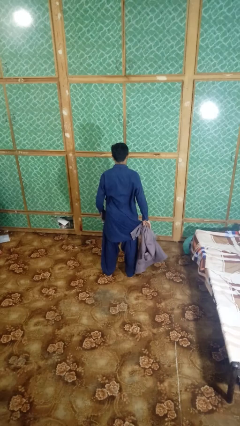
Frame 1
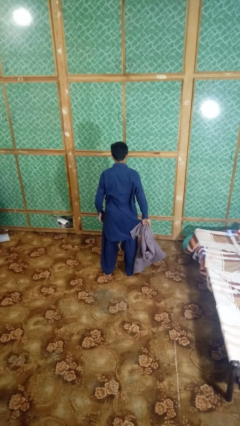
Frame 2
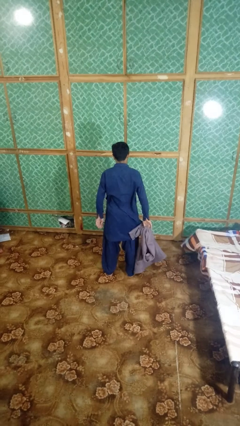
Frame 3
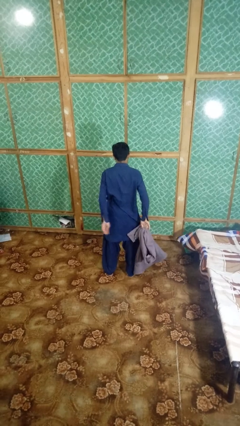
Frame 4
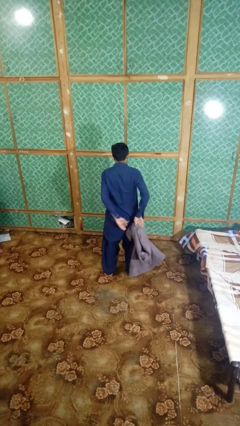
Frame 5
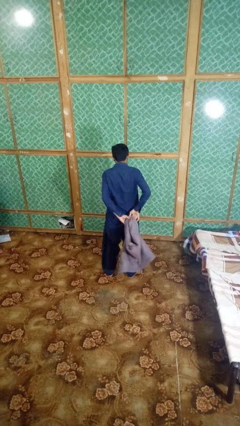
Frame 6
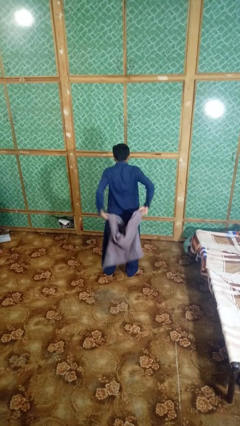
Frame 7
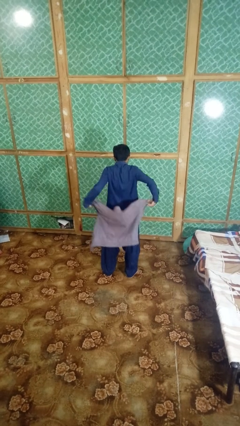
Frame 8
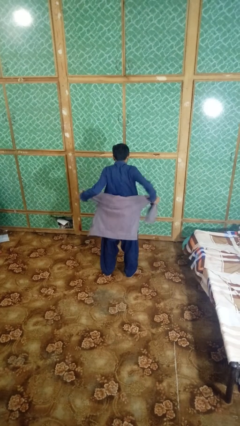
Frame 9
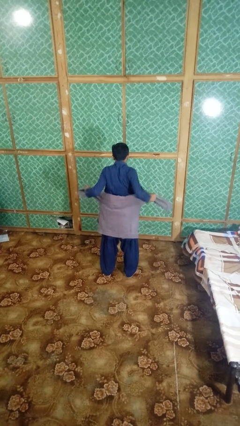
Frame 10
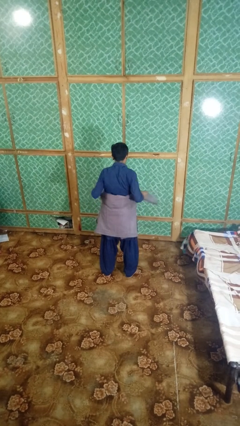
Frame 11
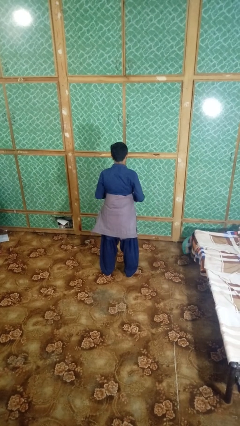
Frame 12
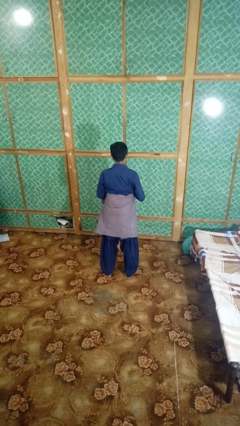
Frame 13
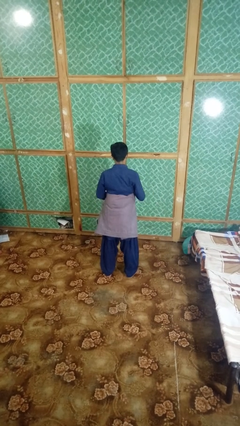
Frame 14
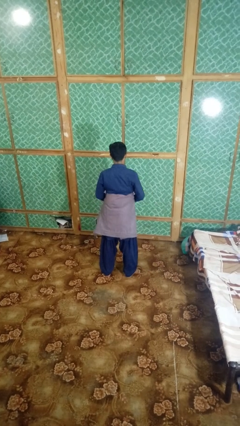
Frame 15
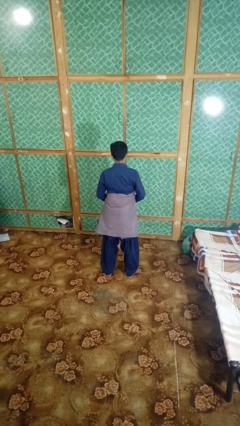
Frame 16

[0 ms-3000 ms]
person ties jacket around waist

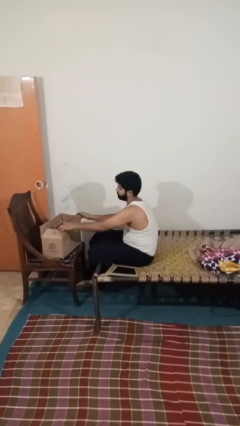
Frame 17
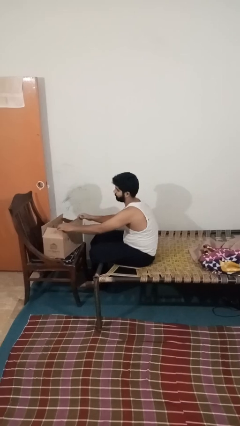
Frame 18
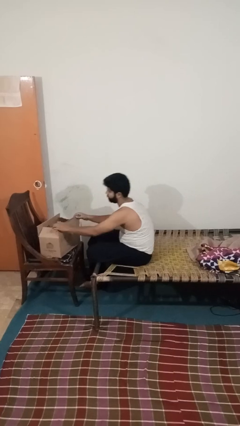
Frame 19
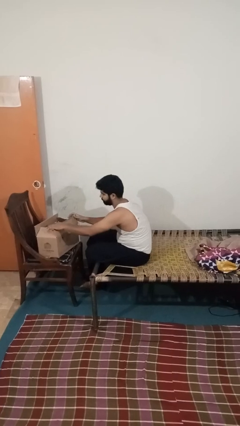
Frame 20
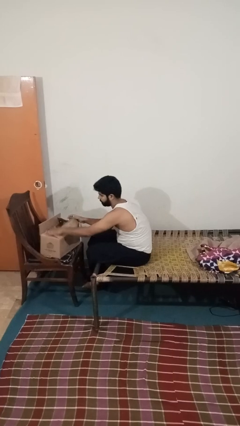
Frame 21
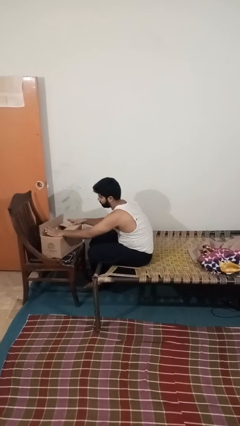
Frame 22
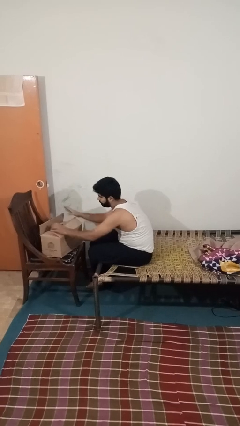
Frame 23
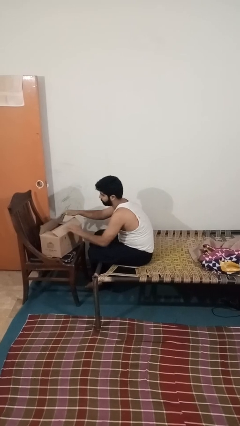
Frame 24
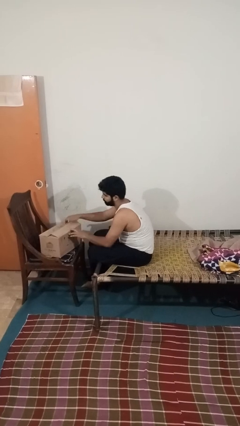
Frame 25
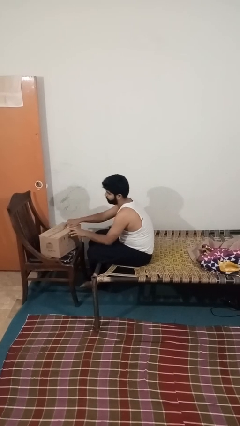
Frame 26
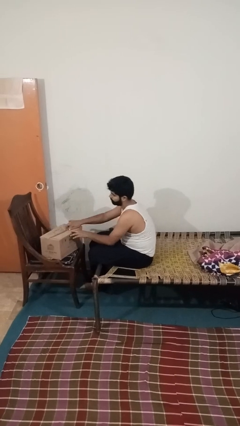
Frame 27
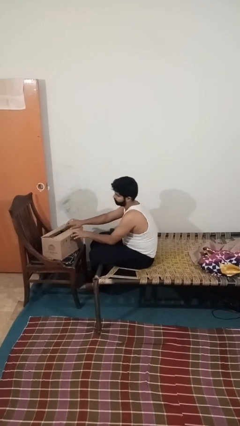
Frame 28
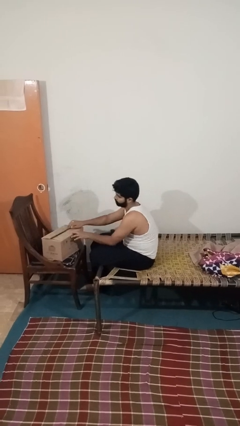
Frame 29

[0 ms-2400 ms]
person closes box

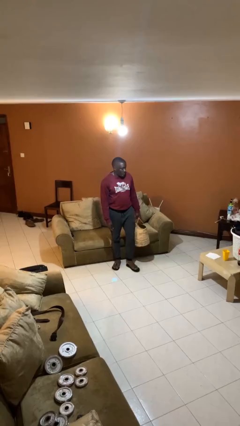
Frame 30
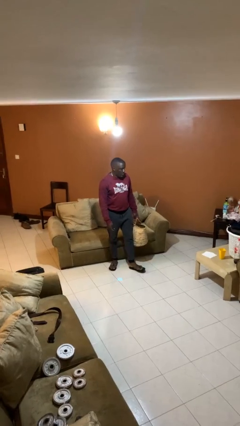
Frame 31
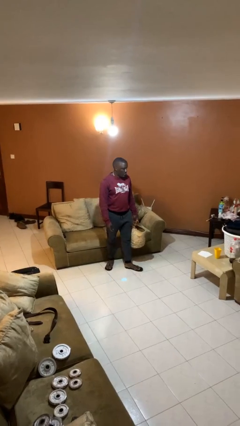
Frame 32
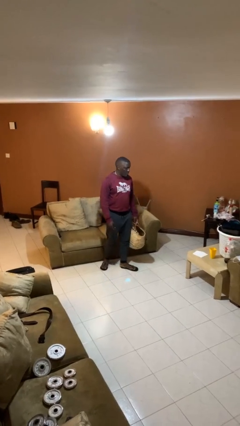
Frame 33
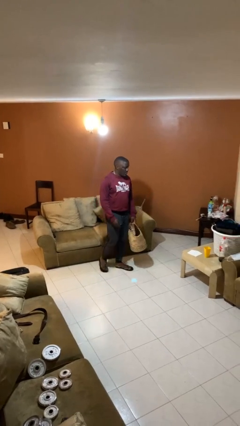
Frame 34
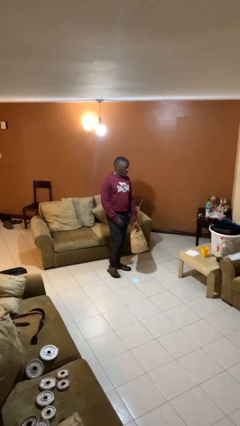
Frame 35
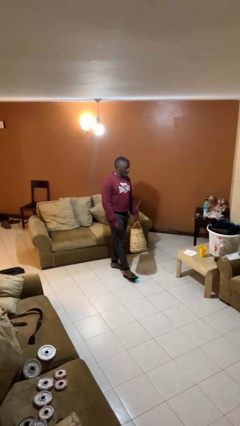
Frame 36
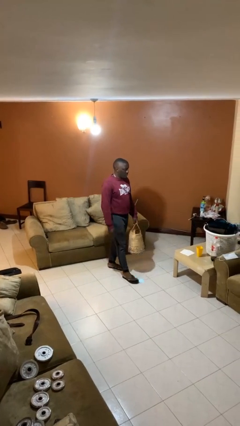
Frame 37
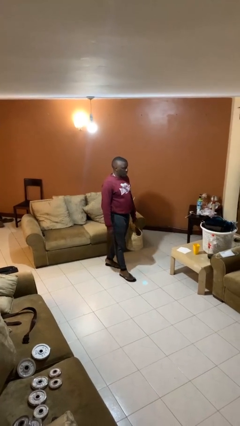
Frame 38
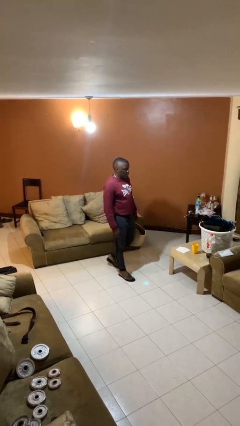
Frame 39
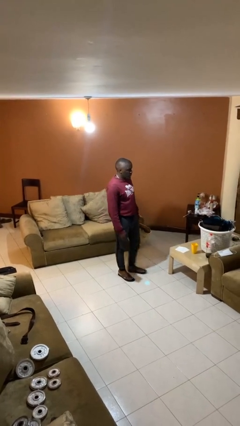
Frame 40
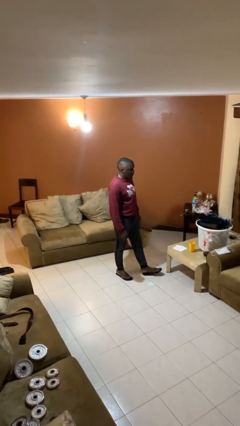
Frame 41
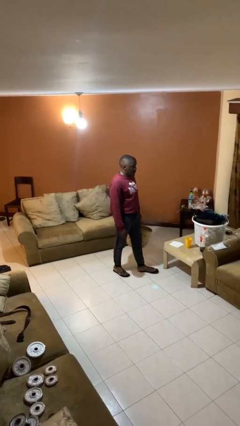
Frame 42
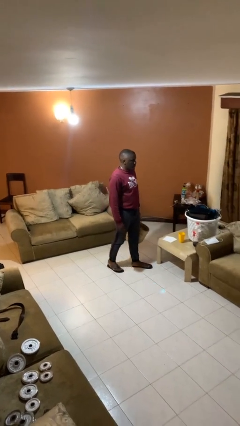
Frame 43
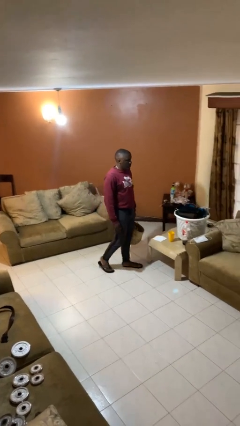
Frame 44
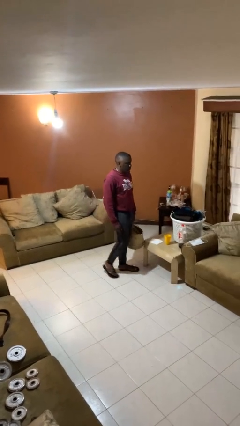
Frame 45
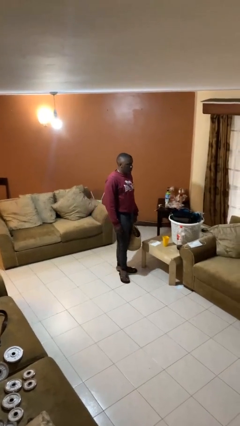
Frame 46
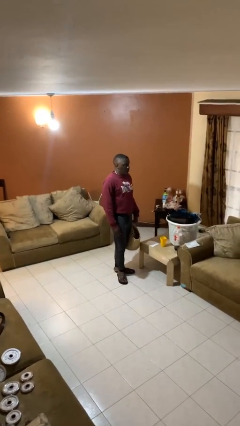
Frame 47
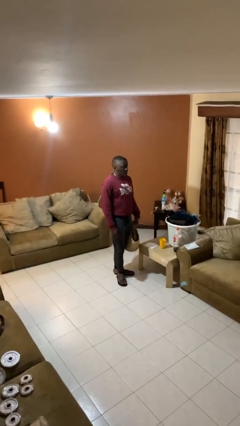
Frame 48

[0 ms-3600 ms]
person carries groceries

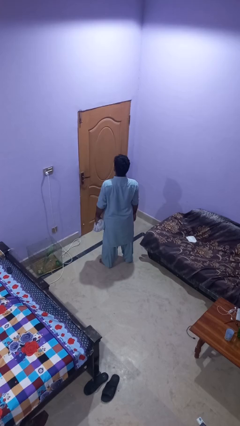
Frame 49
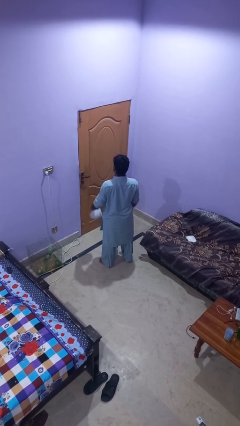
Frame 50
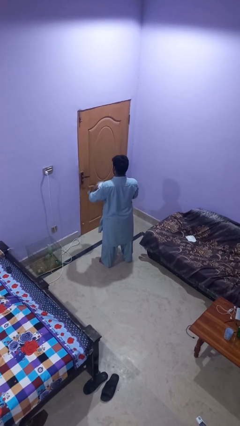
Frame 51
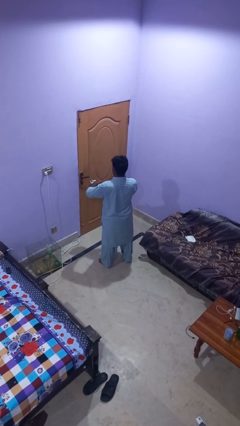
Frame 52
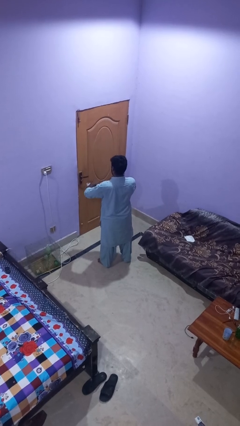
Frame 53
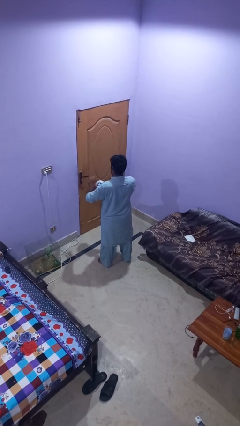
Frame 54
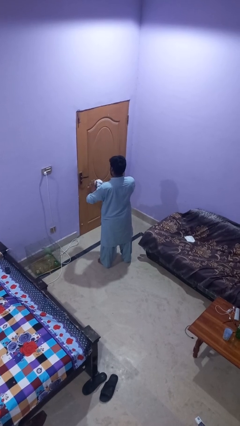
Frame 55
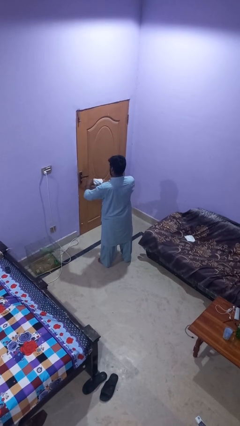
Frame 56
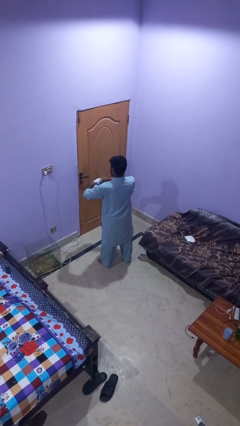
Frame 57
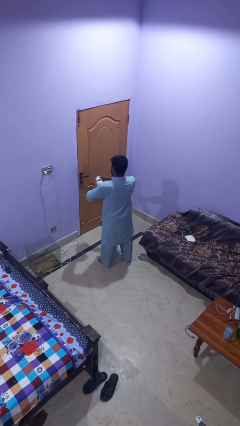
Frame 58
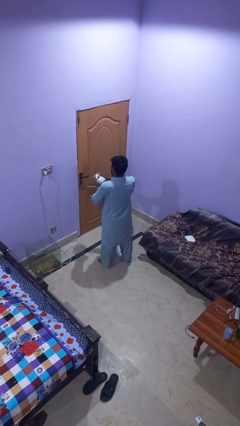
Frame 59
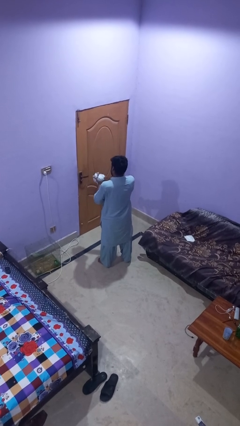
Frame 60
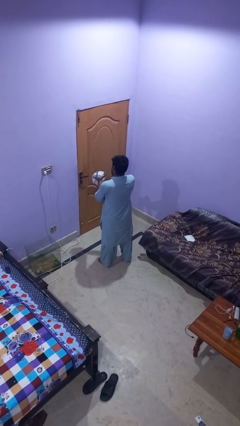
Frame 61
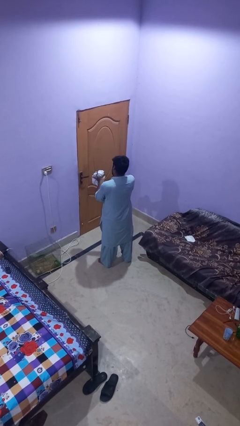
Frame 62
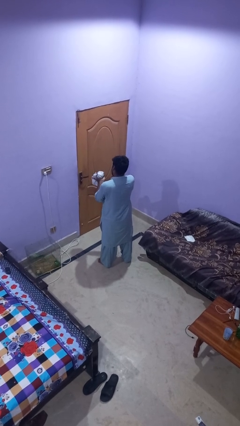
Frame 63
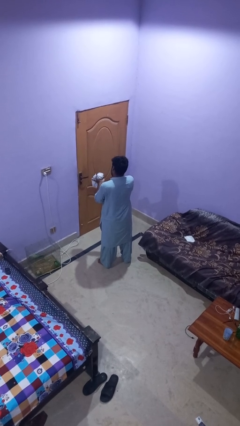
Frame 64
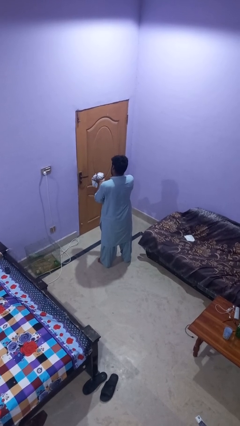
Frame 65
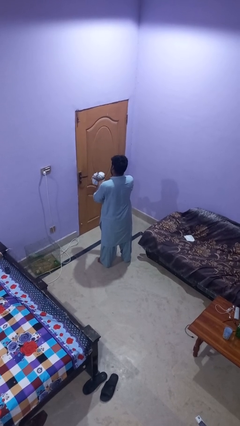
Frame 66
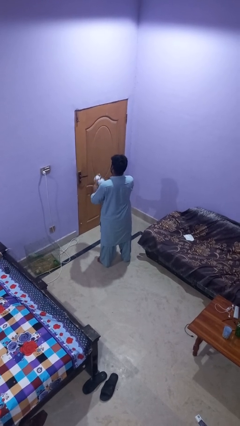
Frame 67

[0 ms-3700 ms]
person squeezes object

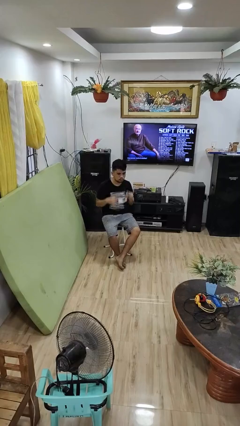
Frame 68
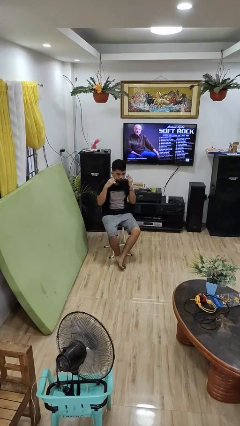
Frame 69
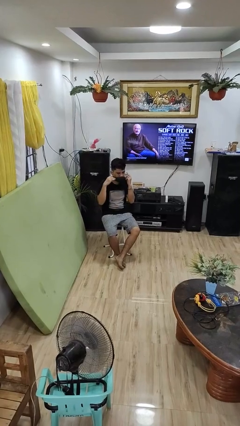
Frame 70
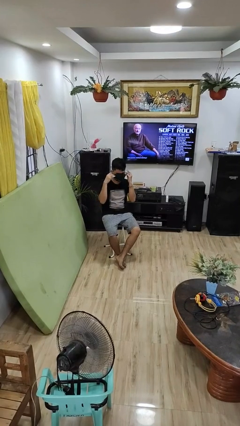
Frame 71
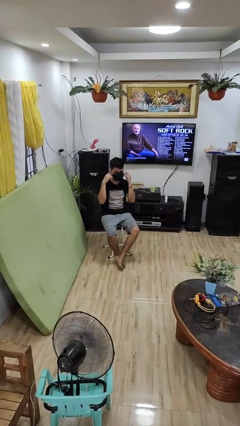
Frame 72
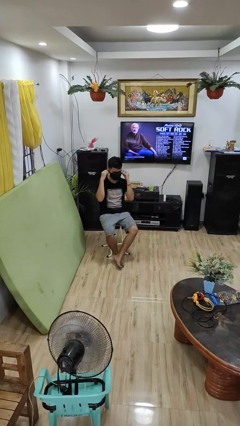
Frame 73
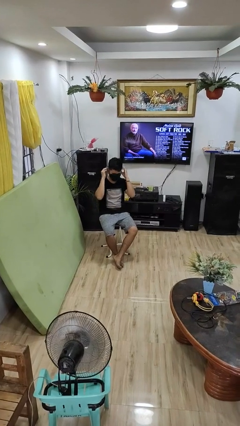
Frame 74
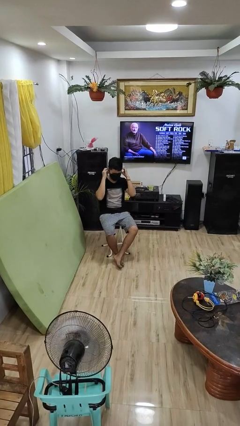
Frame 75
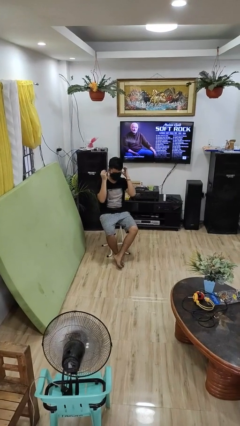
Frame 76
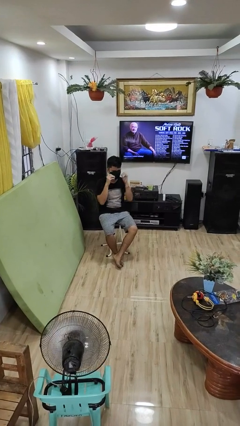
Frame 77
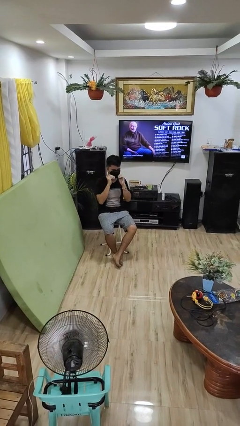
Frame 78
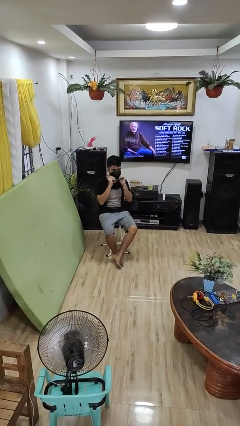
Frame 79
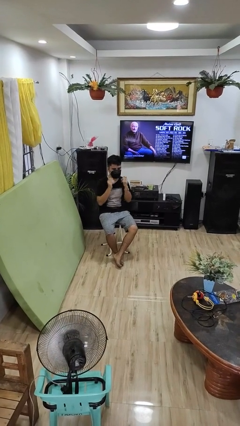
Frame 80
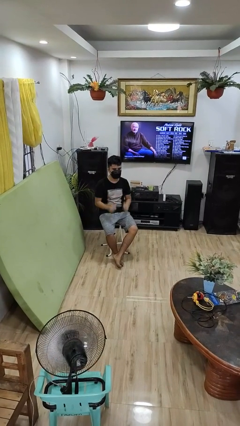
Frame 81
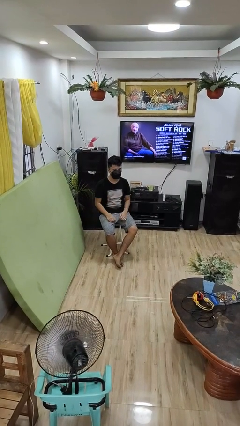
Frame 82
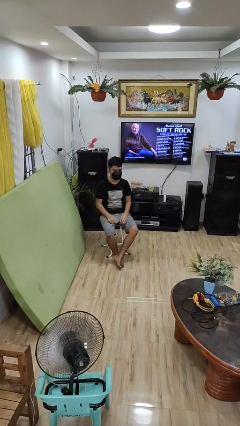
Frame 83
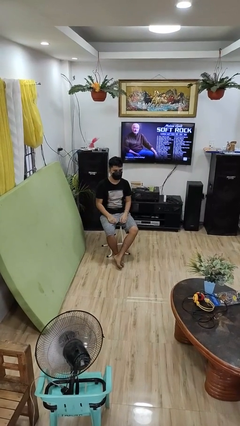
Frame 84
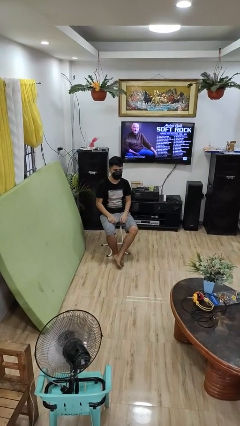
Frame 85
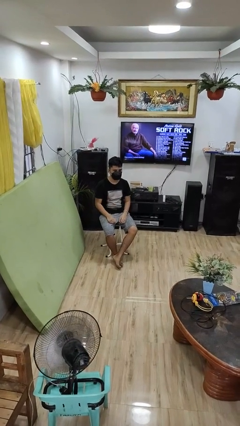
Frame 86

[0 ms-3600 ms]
person puts on facemask

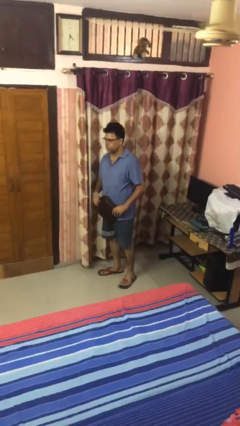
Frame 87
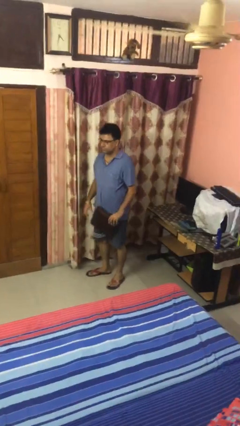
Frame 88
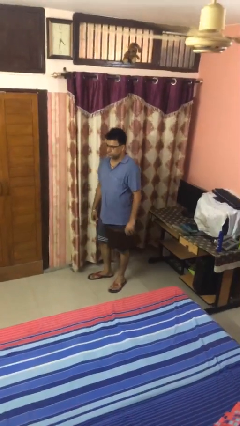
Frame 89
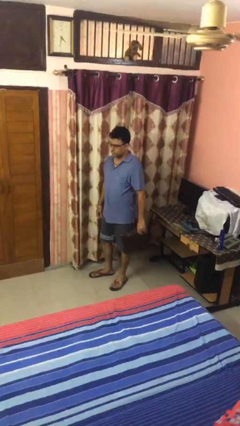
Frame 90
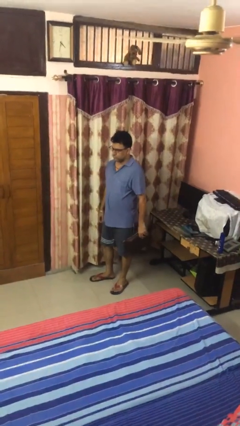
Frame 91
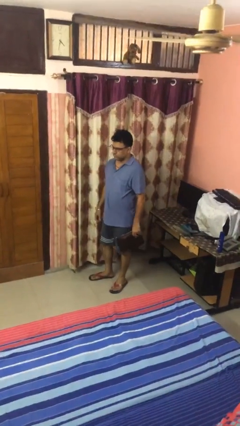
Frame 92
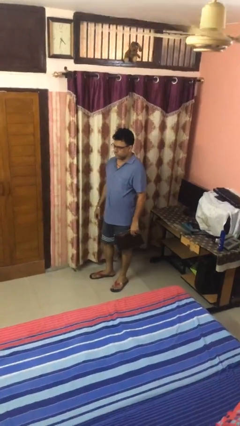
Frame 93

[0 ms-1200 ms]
person picks up object from floor
